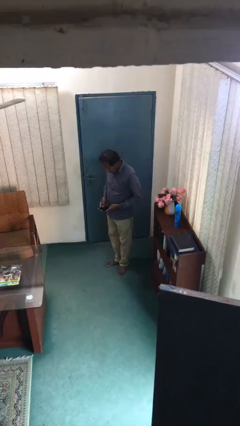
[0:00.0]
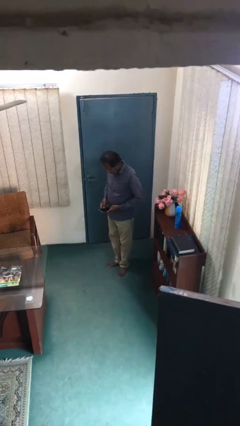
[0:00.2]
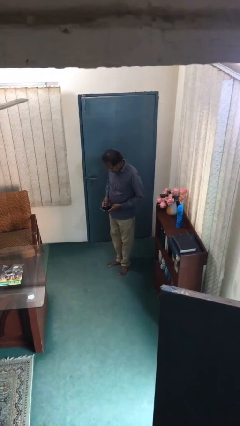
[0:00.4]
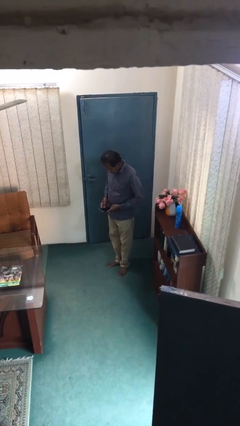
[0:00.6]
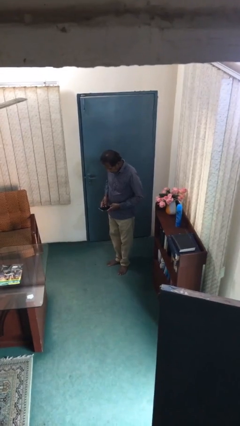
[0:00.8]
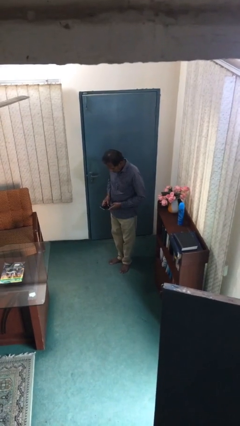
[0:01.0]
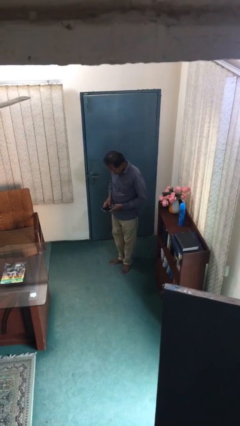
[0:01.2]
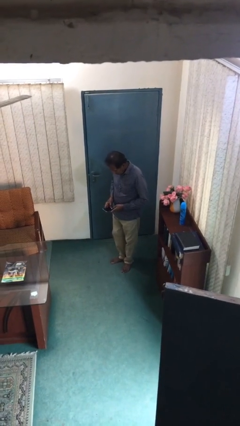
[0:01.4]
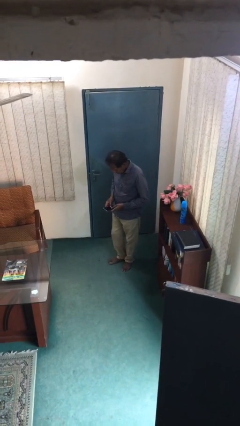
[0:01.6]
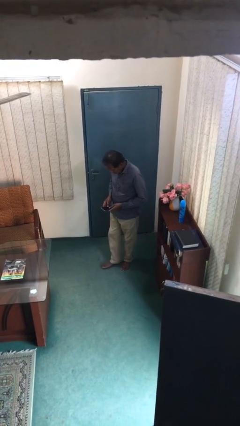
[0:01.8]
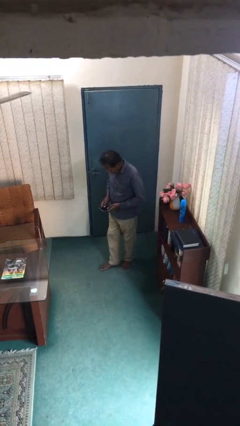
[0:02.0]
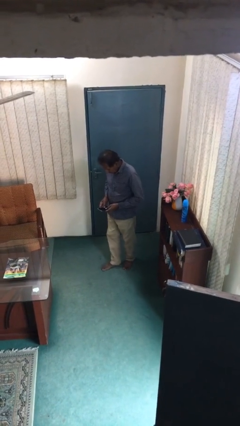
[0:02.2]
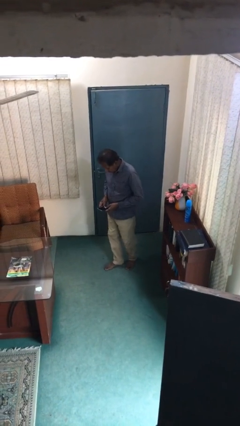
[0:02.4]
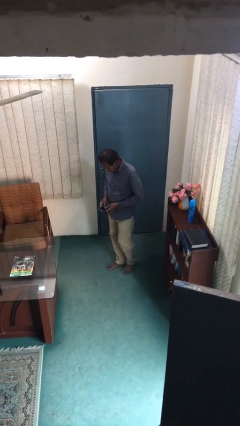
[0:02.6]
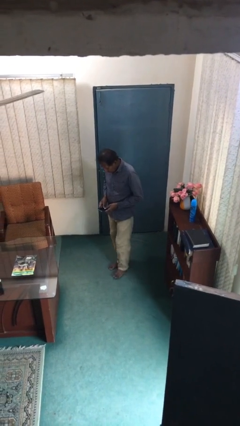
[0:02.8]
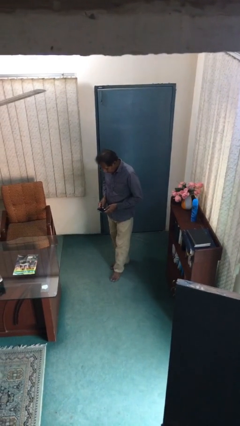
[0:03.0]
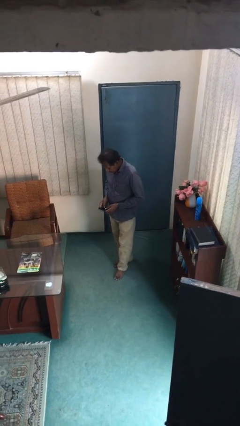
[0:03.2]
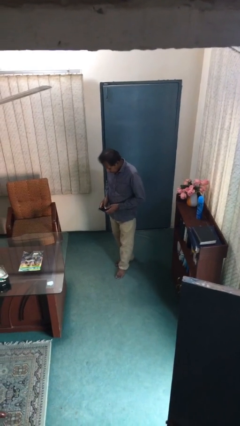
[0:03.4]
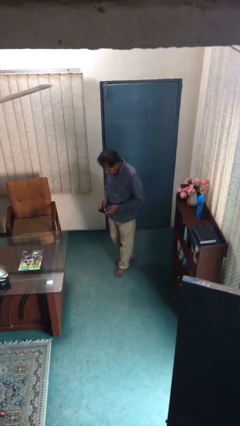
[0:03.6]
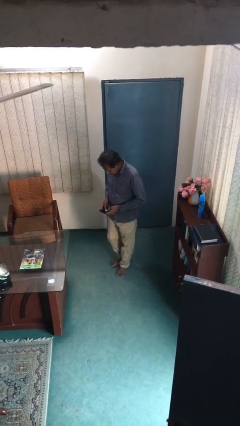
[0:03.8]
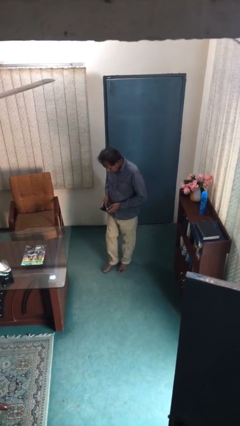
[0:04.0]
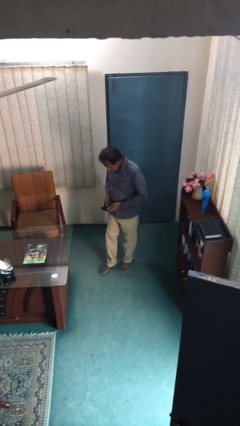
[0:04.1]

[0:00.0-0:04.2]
person texts on phone

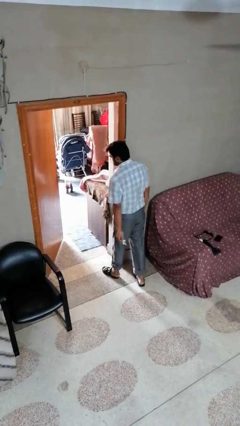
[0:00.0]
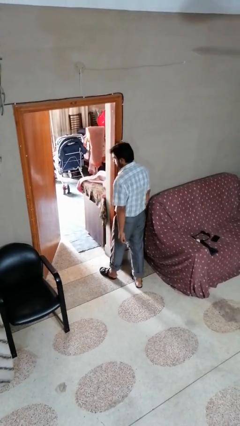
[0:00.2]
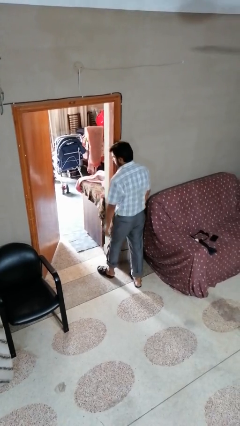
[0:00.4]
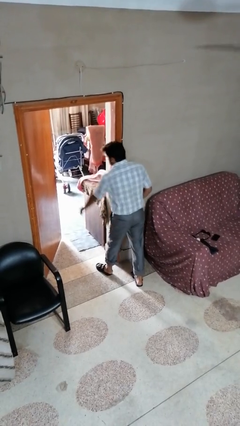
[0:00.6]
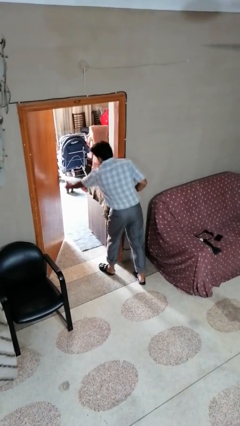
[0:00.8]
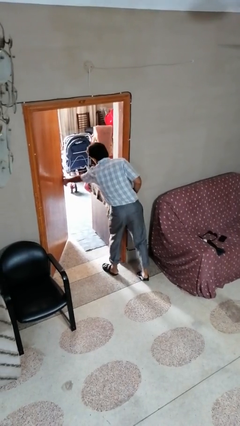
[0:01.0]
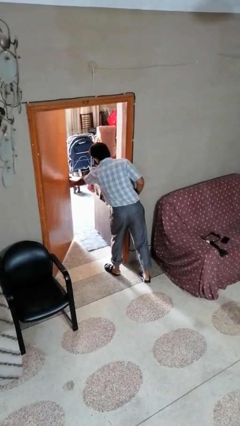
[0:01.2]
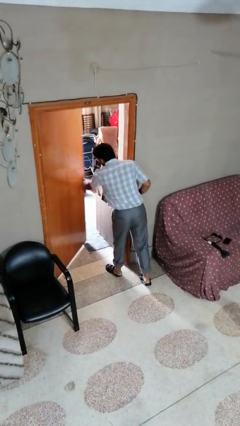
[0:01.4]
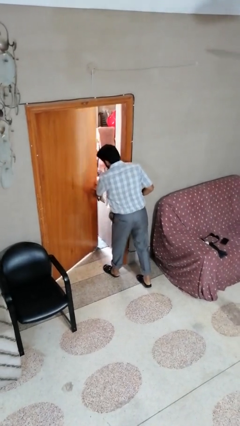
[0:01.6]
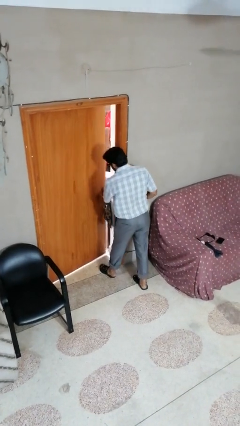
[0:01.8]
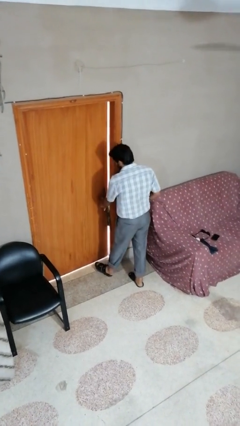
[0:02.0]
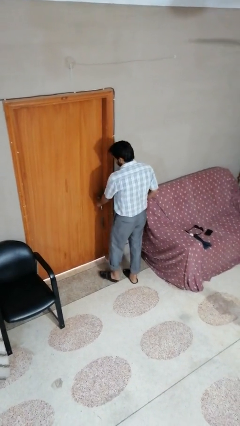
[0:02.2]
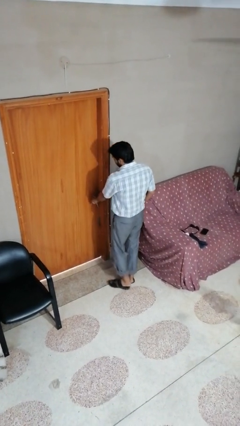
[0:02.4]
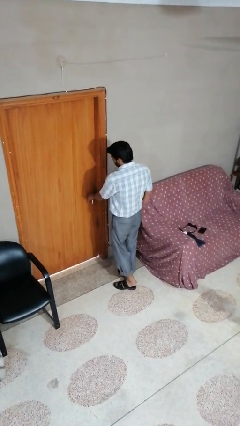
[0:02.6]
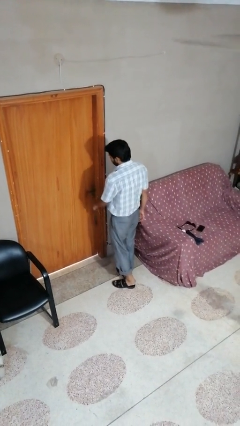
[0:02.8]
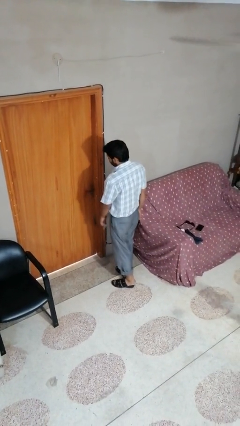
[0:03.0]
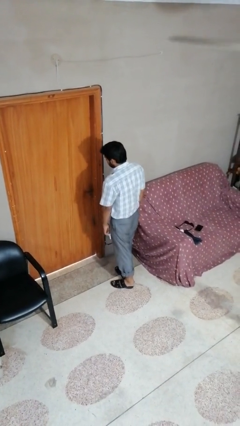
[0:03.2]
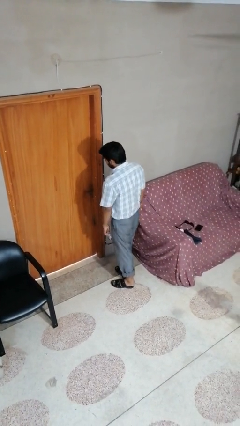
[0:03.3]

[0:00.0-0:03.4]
person closes facility door

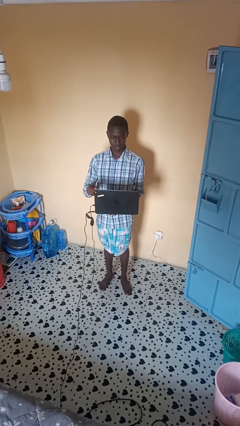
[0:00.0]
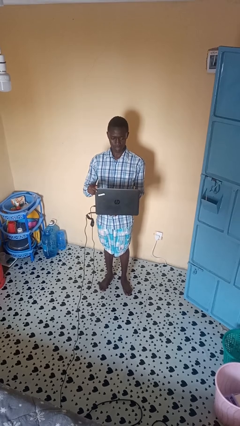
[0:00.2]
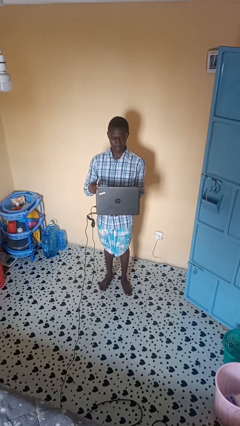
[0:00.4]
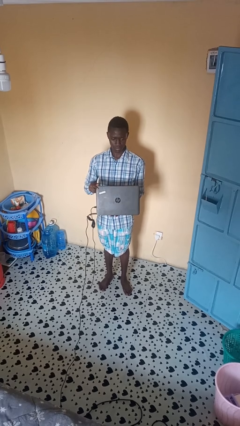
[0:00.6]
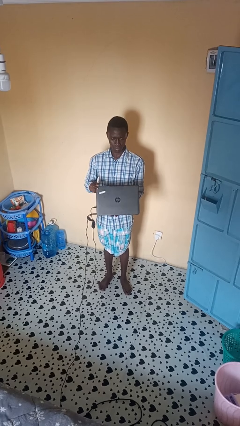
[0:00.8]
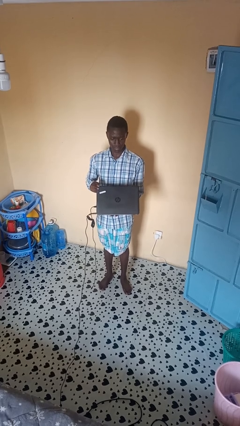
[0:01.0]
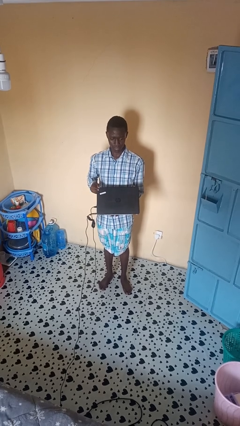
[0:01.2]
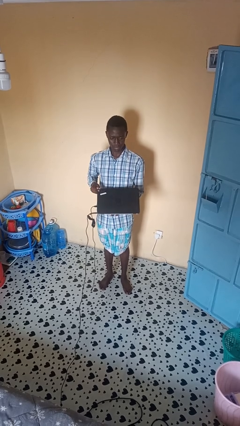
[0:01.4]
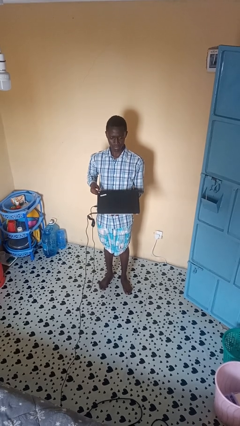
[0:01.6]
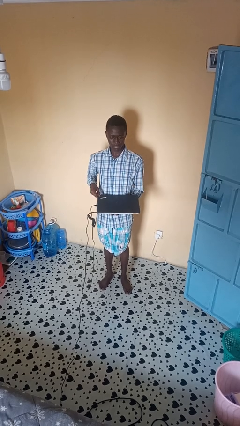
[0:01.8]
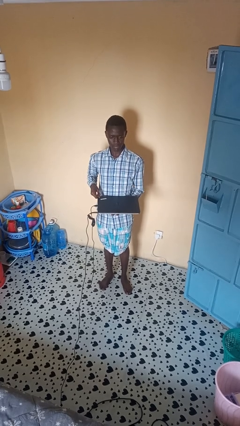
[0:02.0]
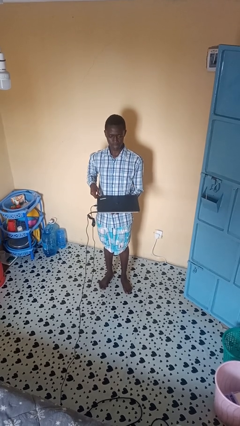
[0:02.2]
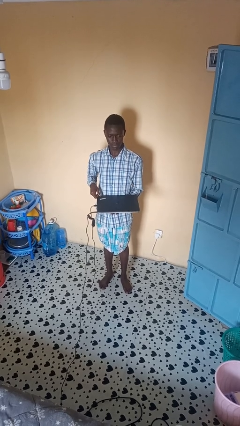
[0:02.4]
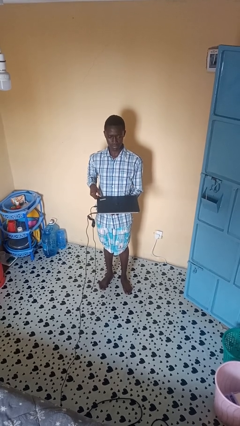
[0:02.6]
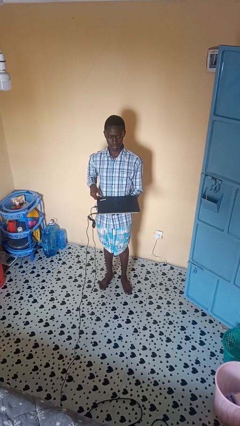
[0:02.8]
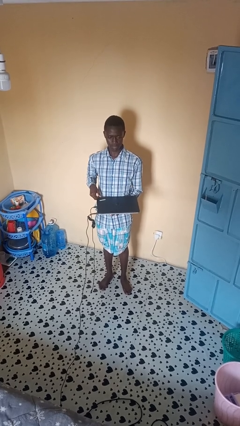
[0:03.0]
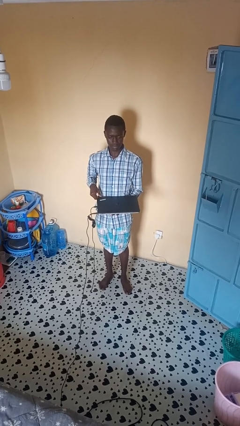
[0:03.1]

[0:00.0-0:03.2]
person closes laptop

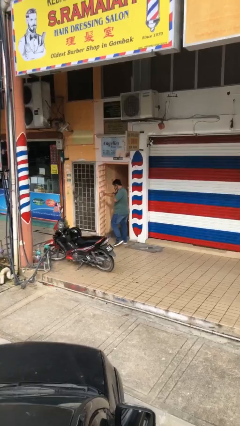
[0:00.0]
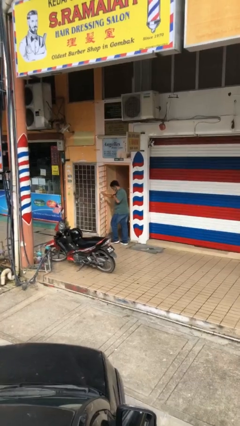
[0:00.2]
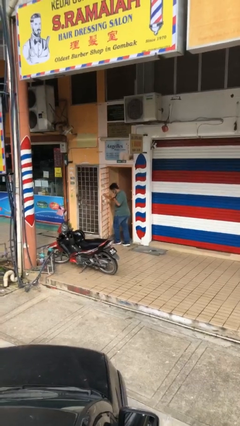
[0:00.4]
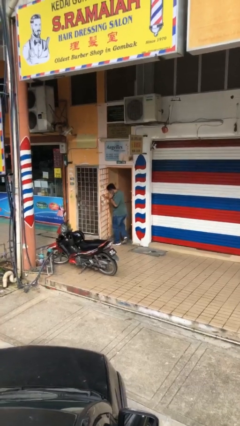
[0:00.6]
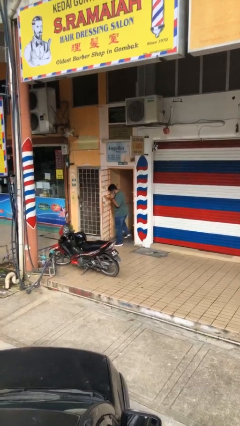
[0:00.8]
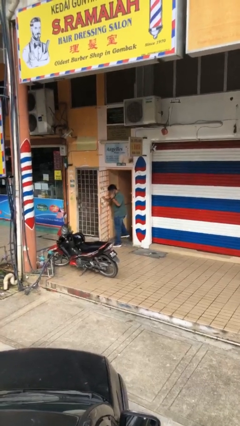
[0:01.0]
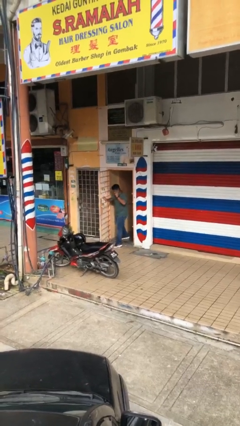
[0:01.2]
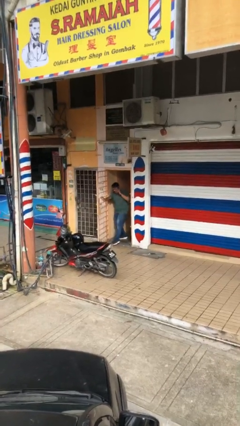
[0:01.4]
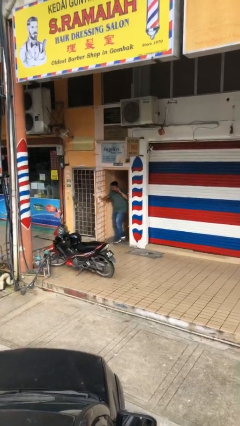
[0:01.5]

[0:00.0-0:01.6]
person exits scene through structure

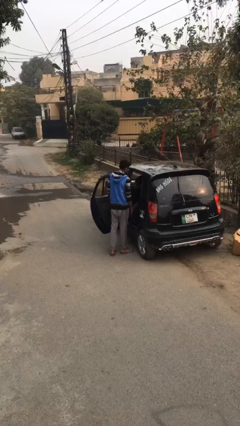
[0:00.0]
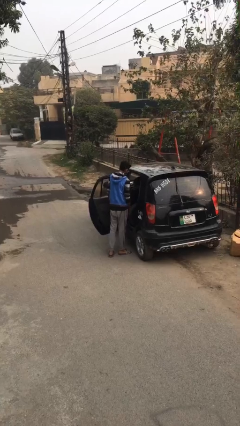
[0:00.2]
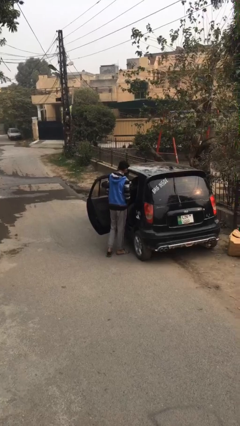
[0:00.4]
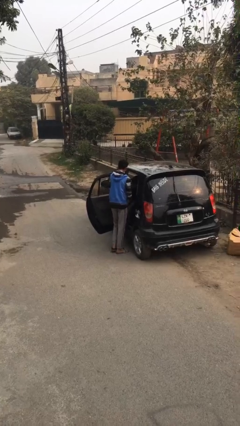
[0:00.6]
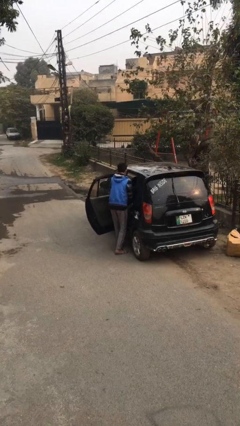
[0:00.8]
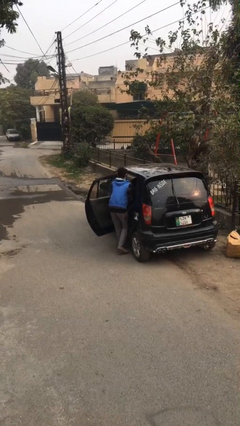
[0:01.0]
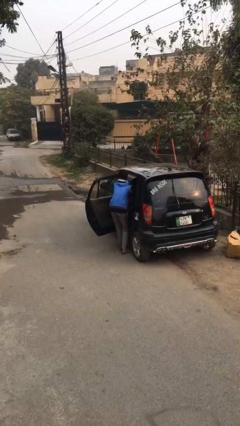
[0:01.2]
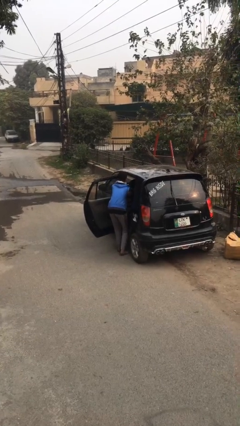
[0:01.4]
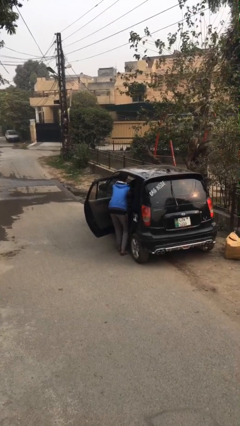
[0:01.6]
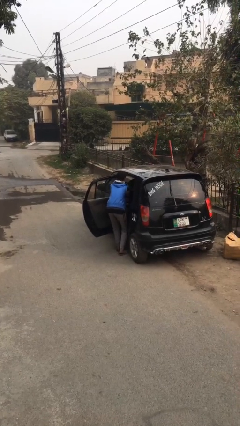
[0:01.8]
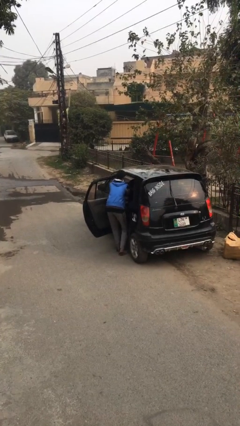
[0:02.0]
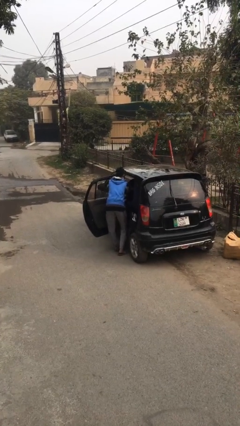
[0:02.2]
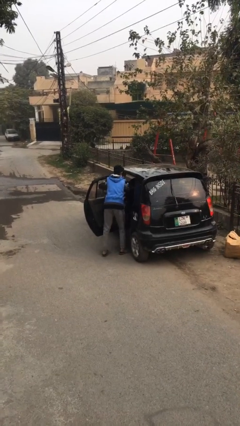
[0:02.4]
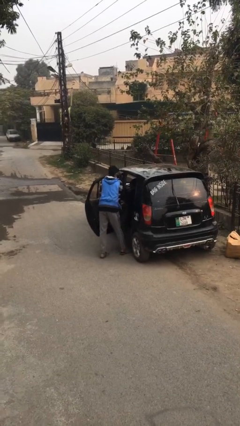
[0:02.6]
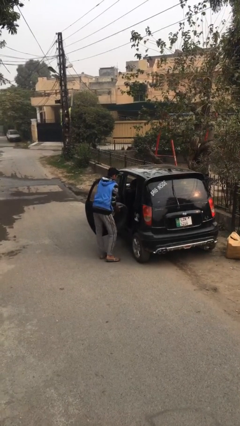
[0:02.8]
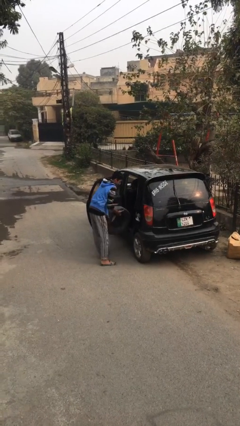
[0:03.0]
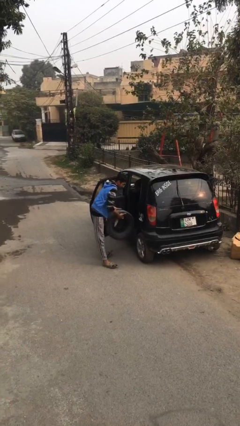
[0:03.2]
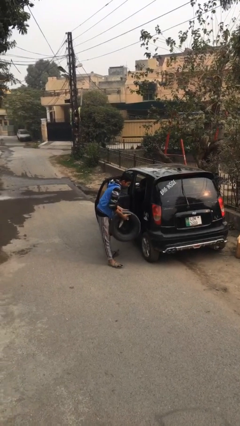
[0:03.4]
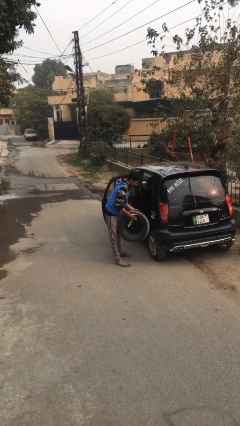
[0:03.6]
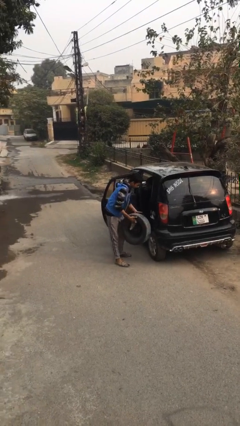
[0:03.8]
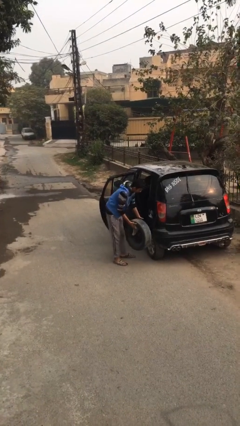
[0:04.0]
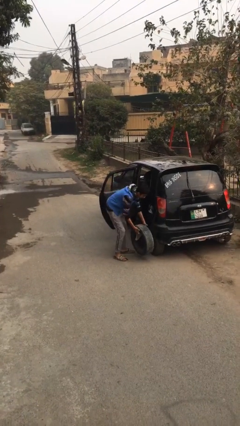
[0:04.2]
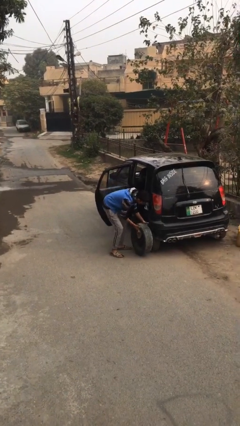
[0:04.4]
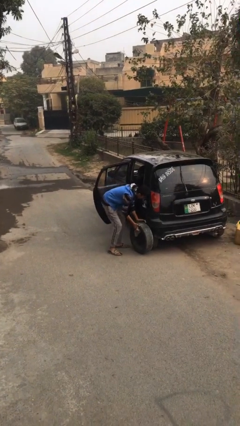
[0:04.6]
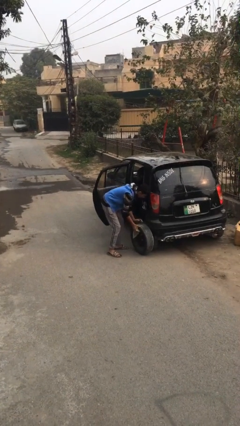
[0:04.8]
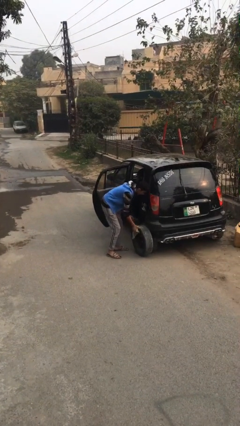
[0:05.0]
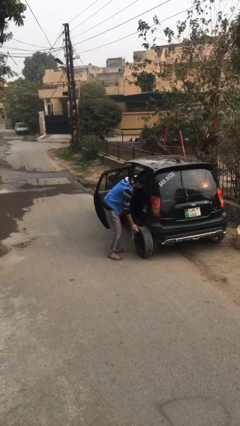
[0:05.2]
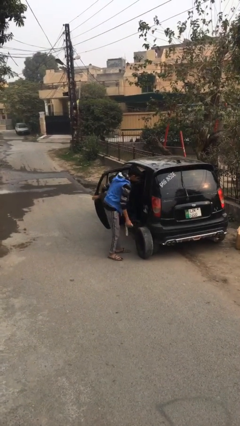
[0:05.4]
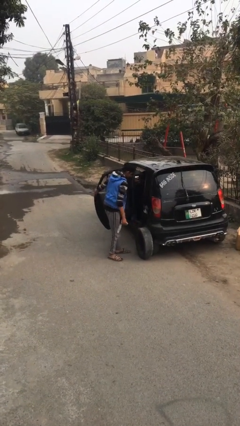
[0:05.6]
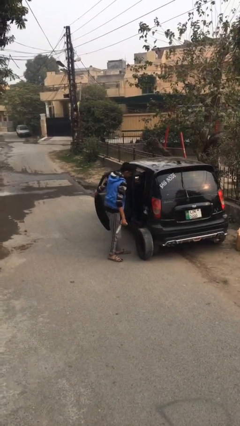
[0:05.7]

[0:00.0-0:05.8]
person unloads car
